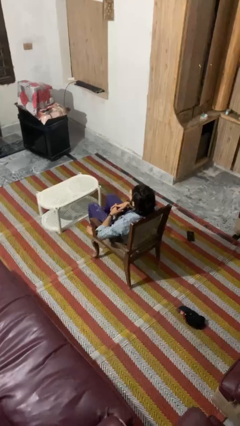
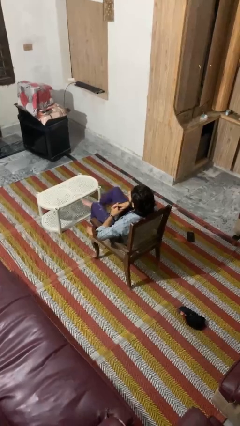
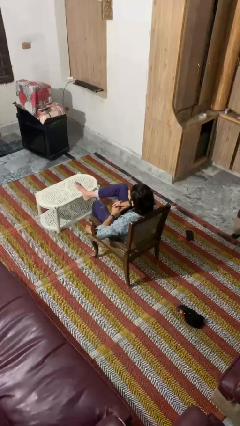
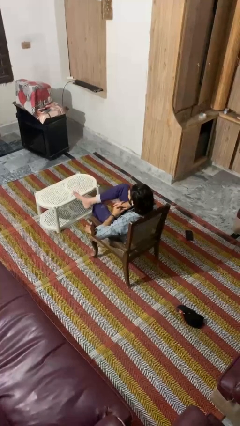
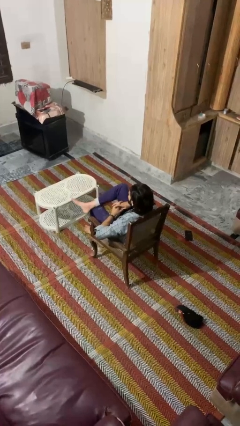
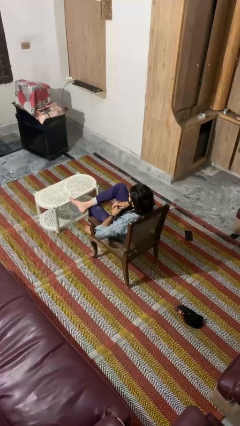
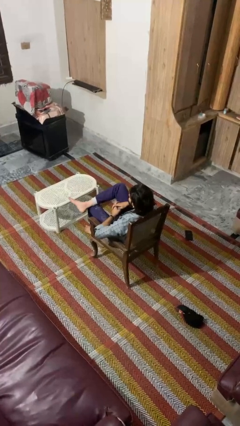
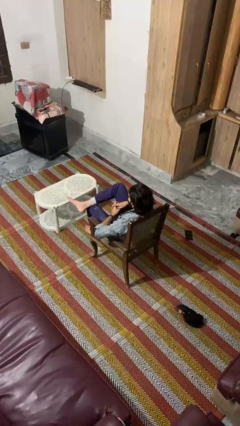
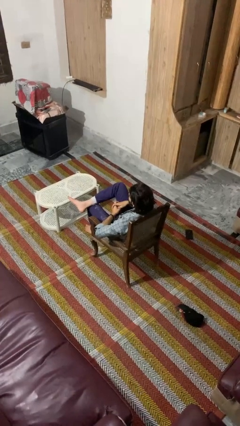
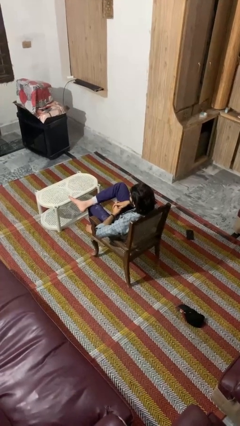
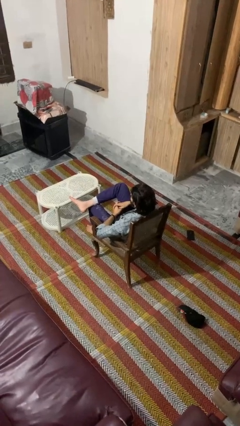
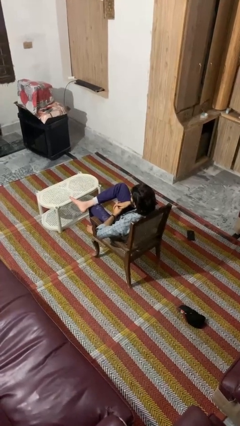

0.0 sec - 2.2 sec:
person crosses legs

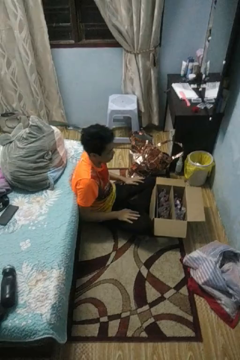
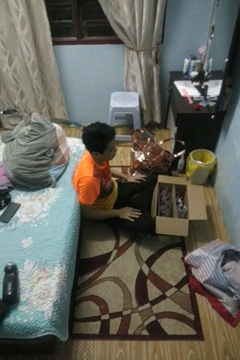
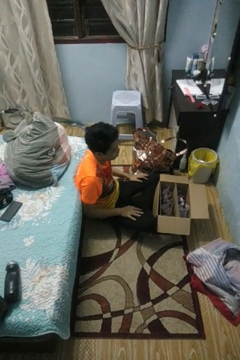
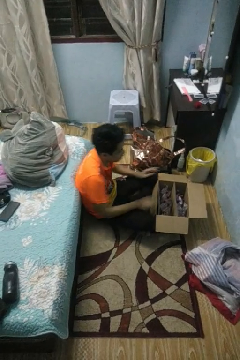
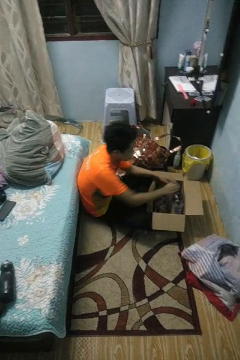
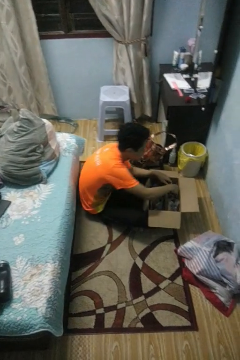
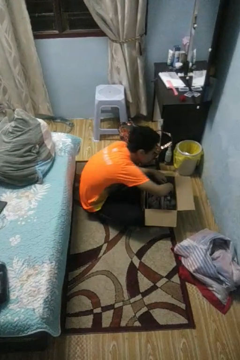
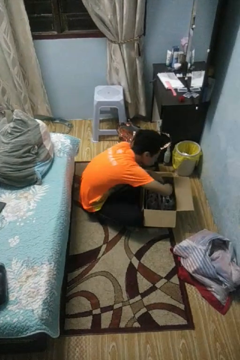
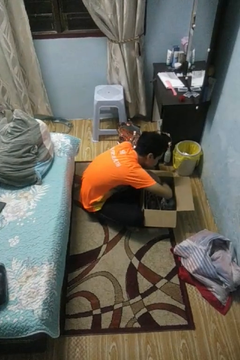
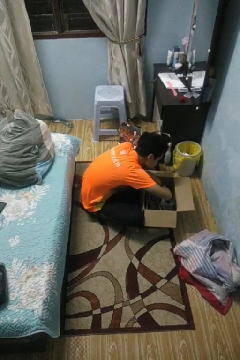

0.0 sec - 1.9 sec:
person searches in box

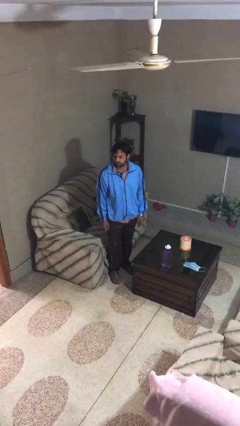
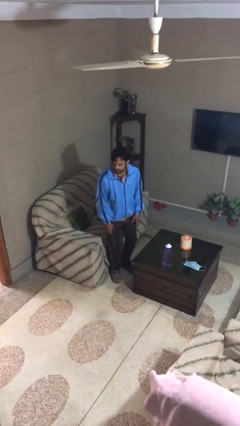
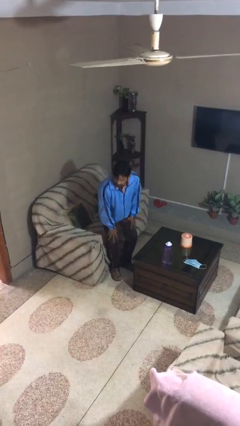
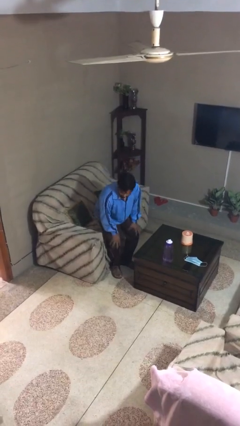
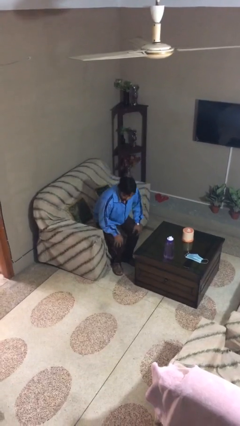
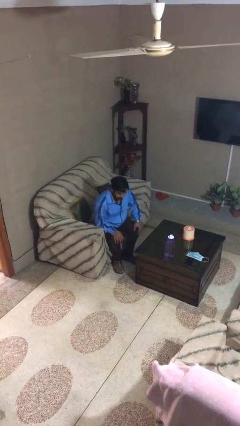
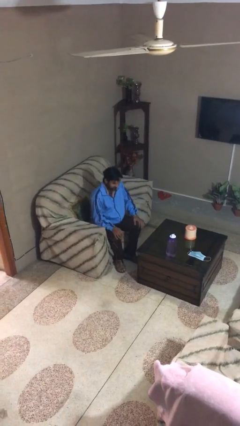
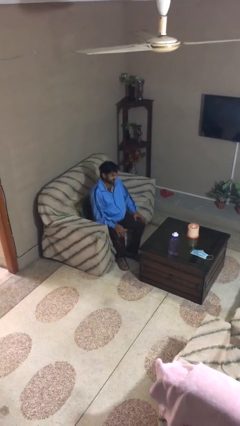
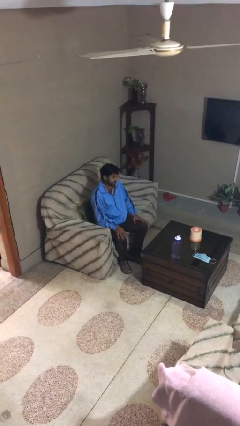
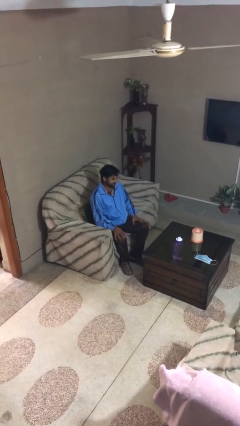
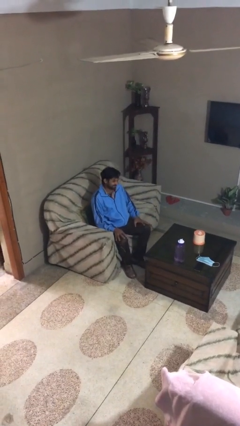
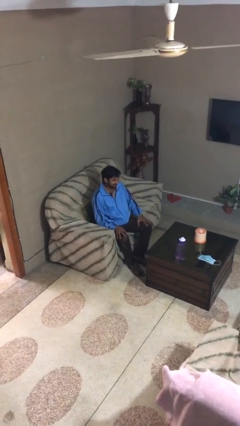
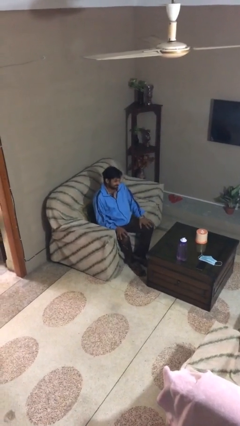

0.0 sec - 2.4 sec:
person sits down

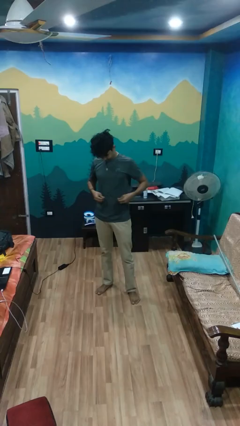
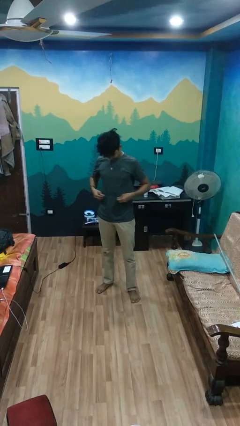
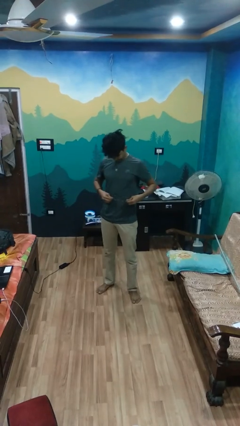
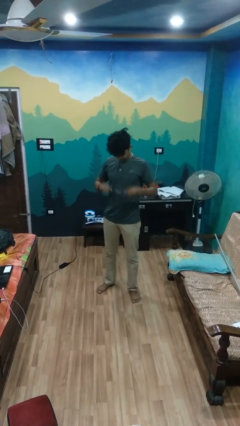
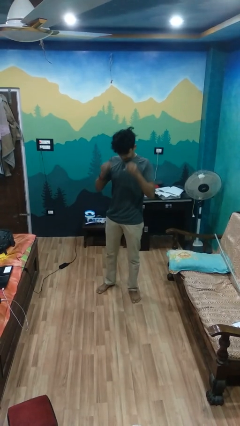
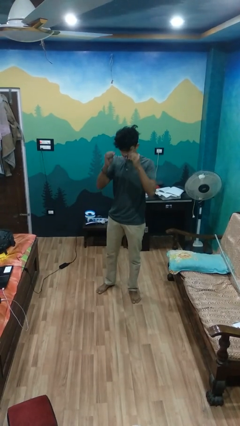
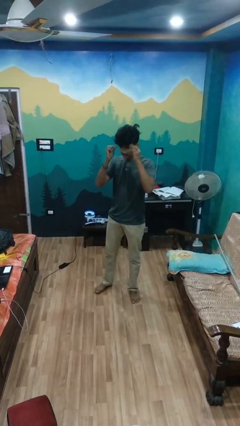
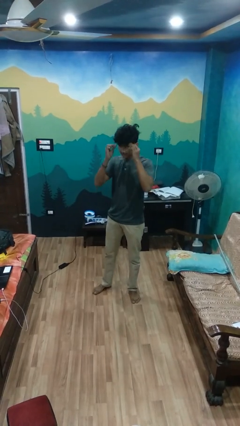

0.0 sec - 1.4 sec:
person cleans eyeglasses

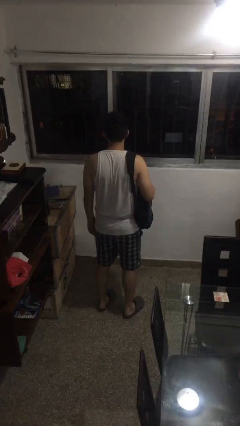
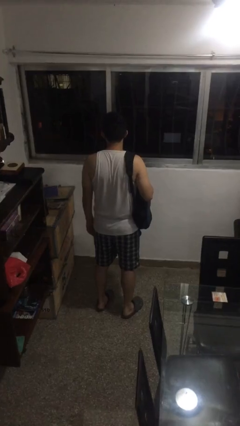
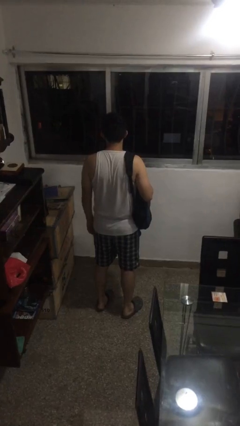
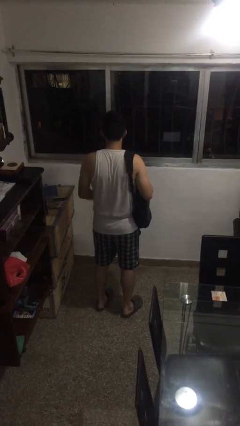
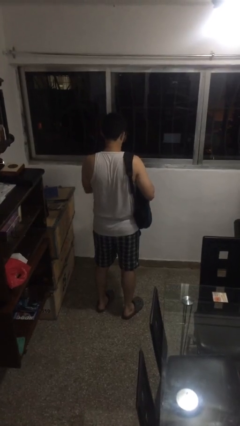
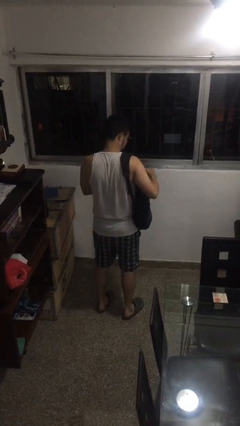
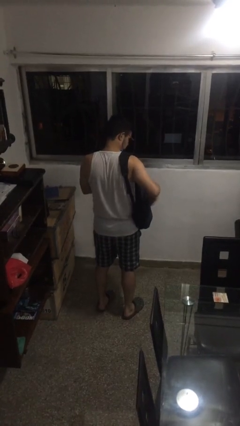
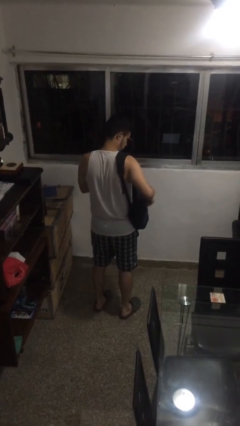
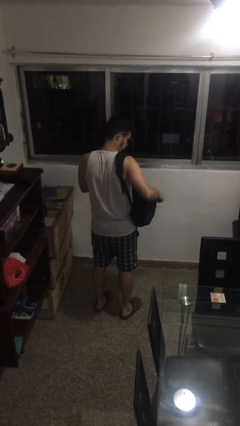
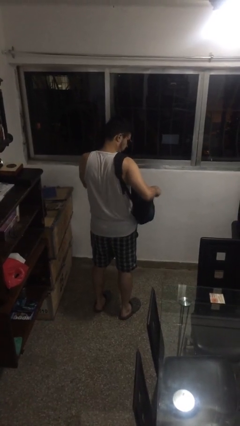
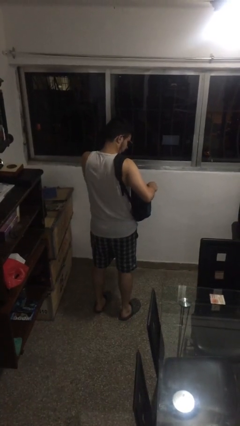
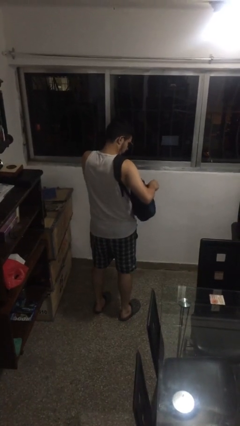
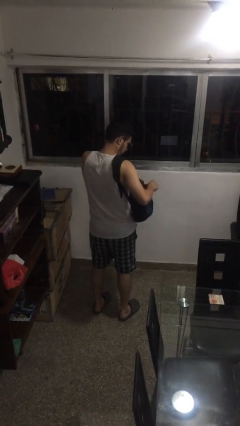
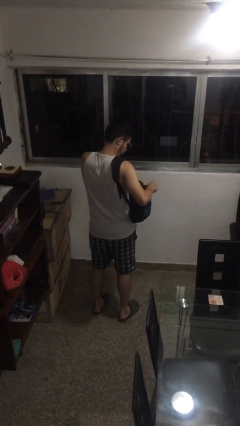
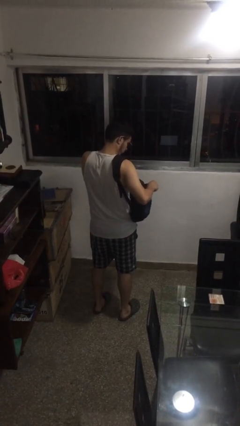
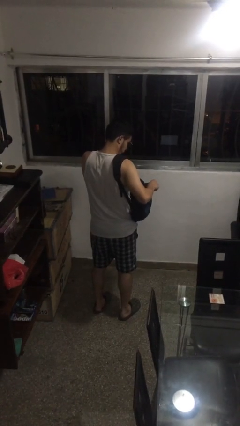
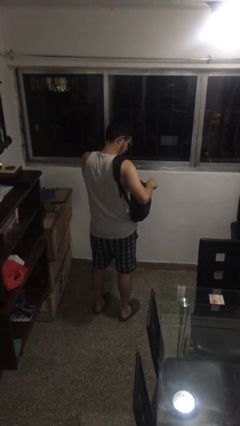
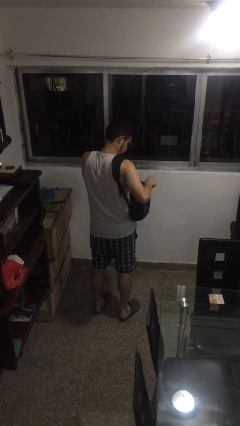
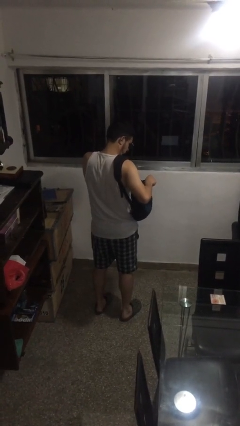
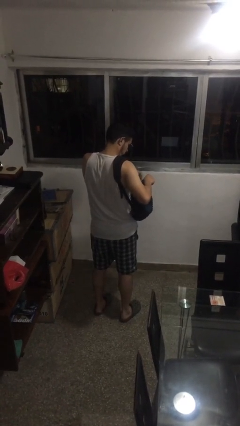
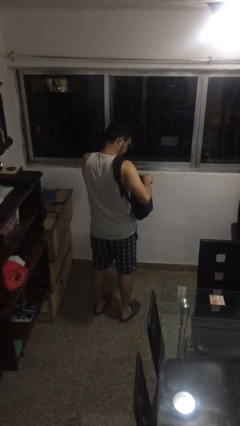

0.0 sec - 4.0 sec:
person searches in backpack

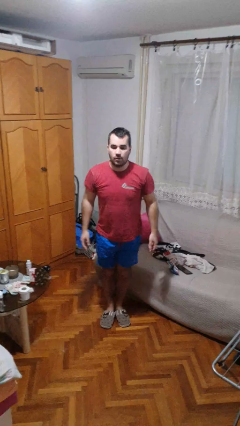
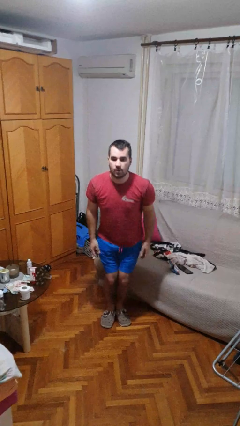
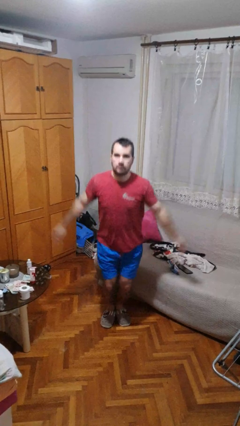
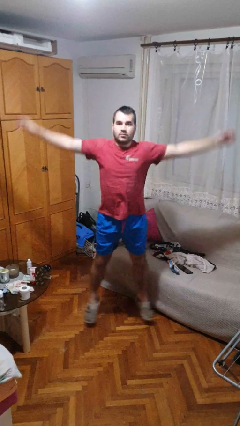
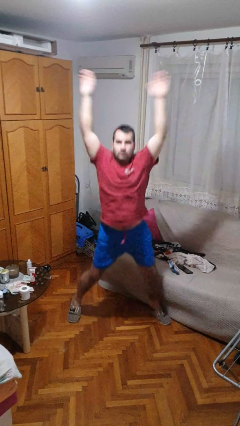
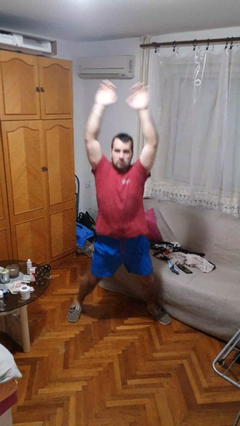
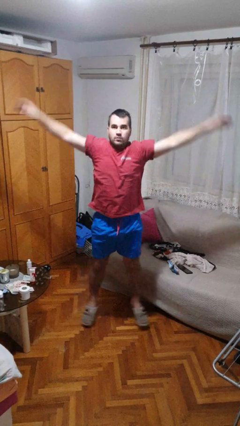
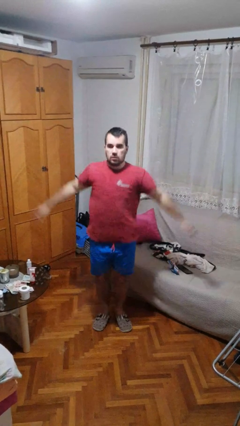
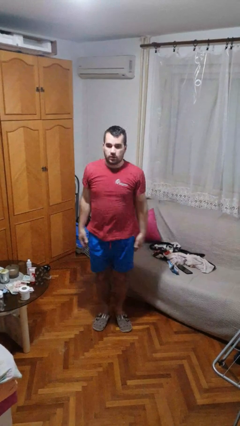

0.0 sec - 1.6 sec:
person exercises with jumping jacks

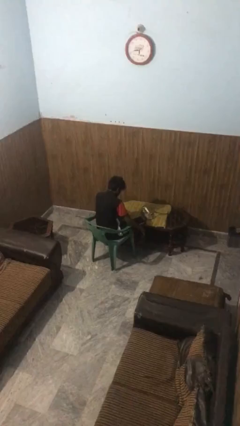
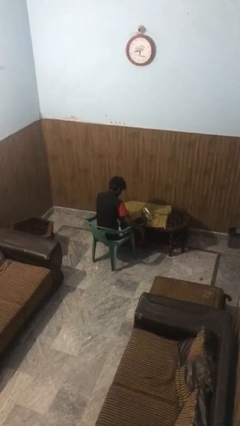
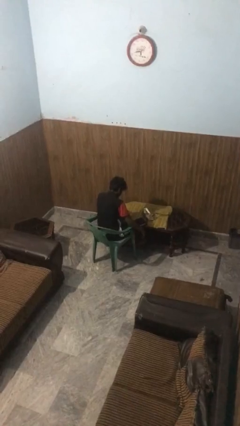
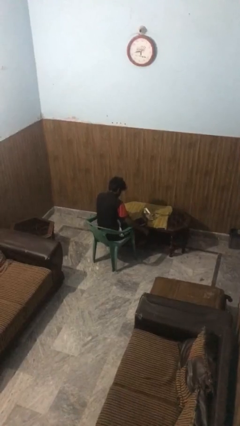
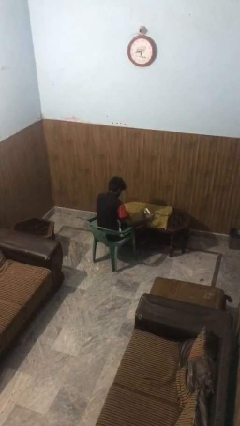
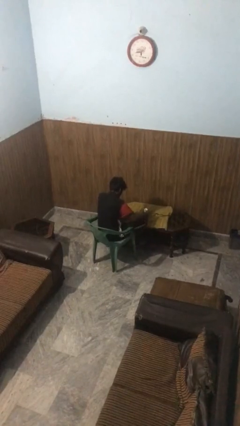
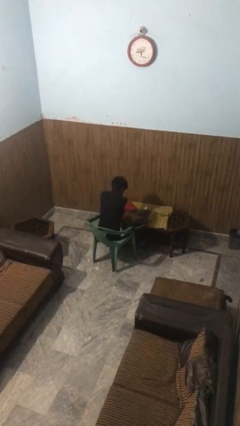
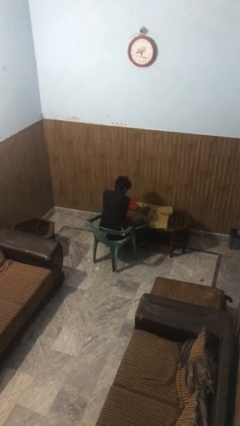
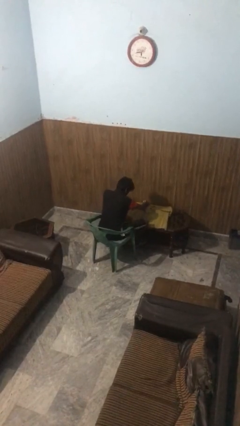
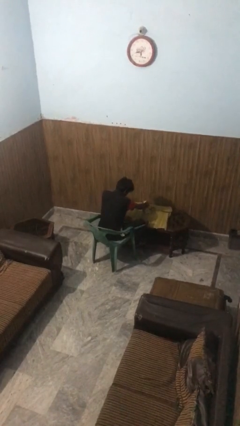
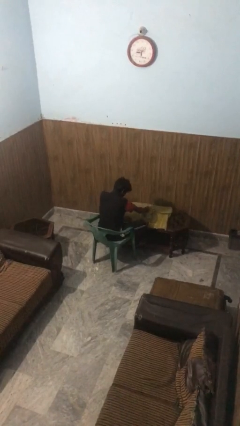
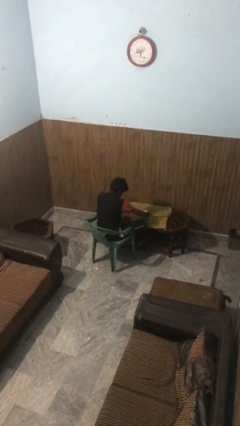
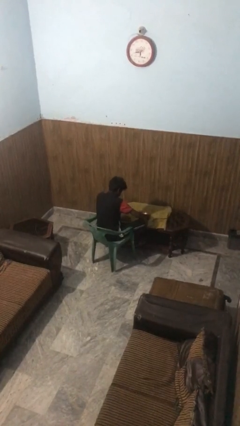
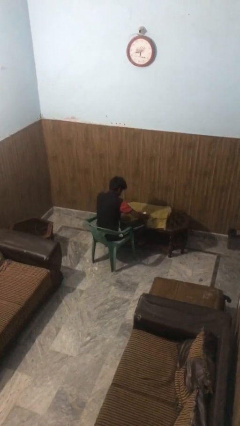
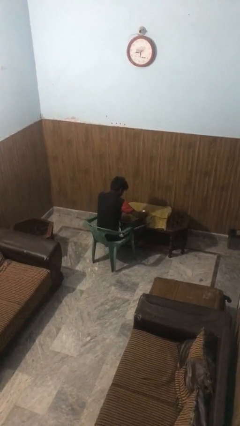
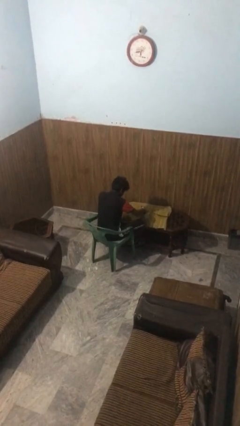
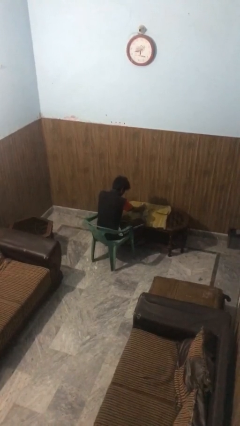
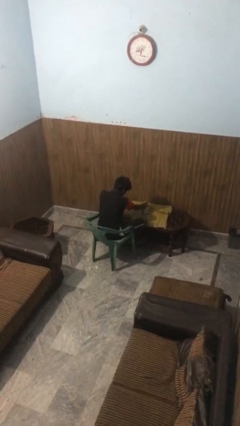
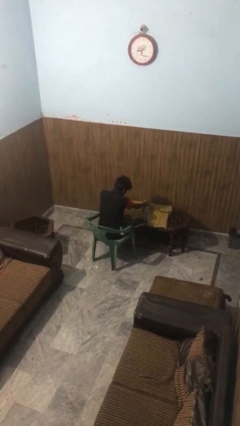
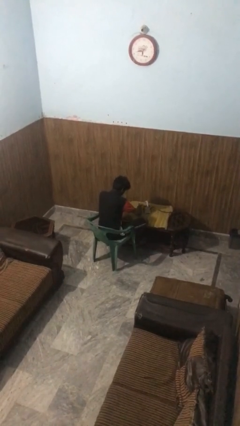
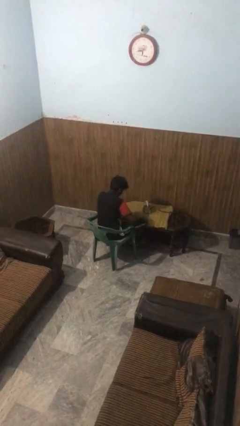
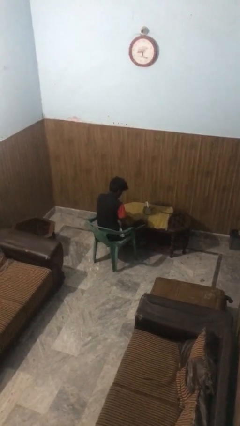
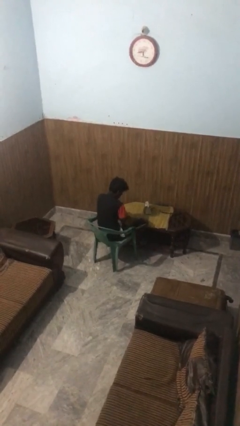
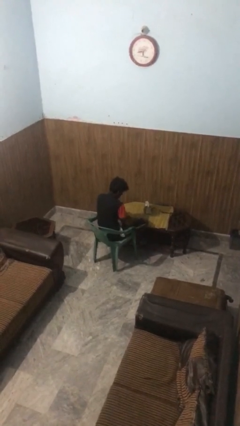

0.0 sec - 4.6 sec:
person irons clothes
